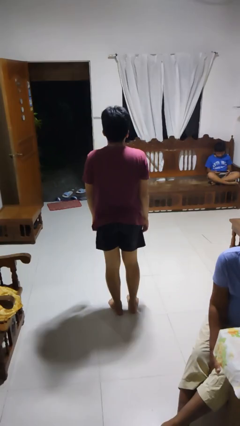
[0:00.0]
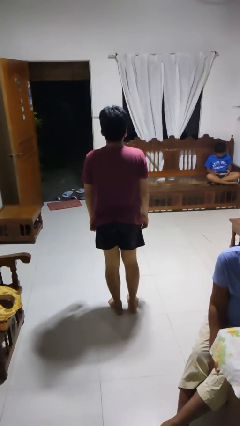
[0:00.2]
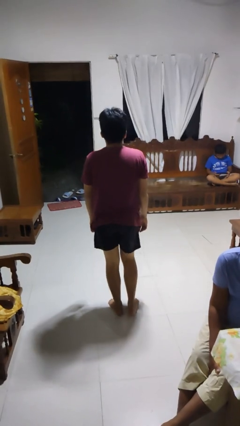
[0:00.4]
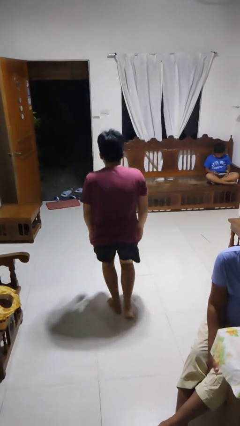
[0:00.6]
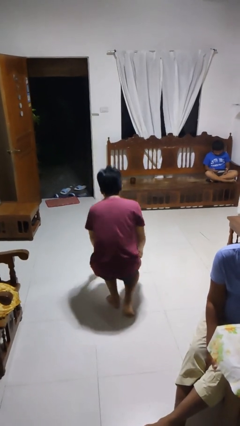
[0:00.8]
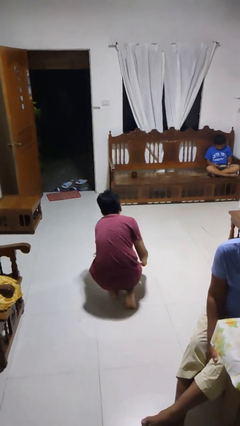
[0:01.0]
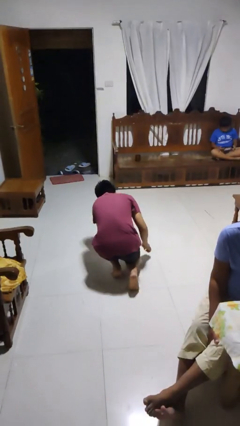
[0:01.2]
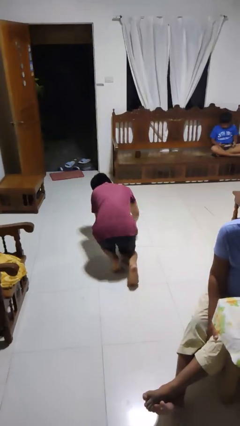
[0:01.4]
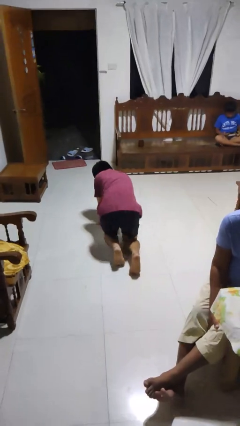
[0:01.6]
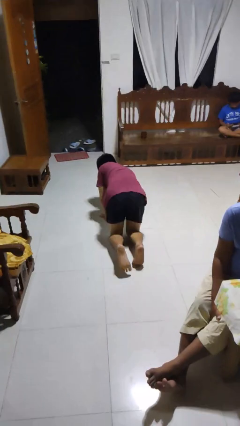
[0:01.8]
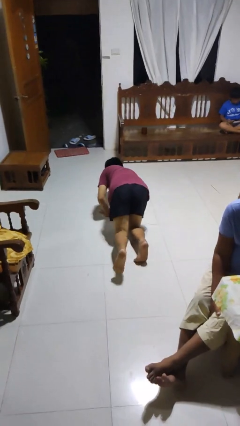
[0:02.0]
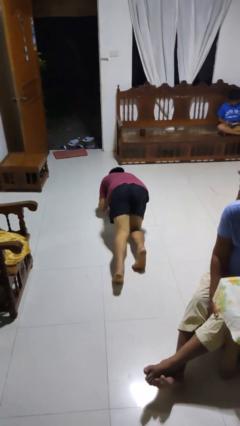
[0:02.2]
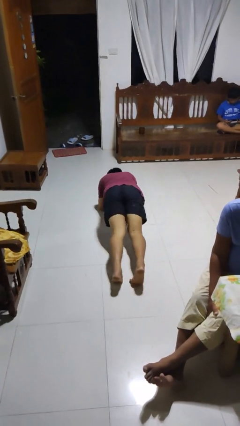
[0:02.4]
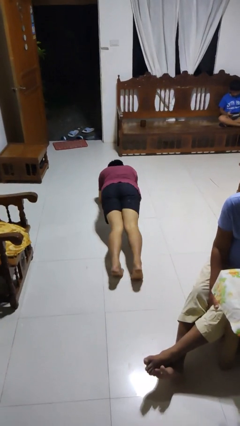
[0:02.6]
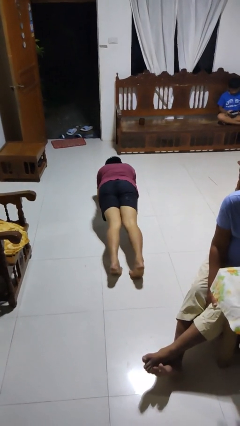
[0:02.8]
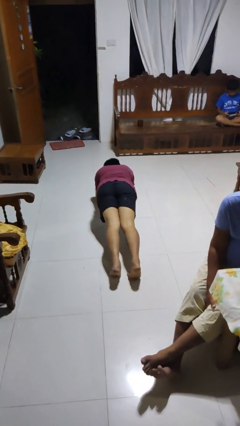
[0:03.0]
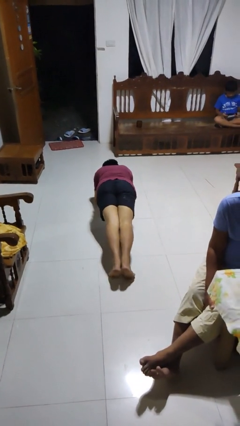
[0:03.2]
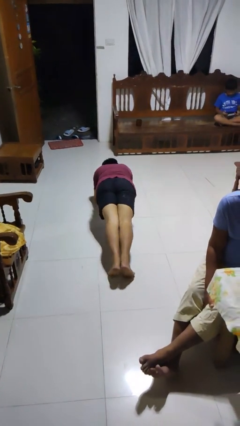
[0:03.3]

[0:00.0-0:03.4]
person exercises with plank

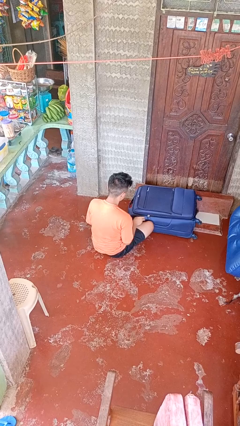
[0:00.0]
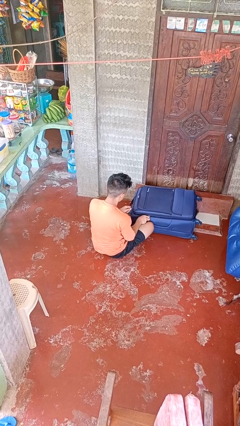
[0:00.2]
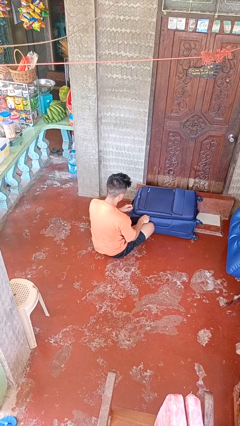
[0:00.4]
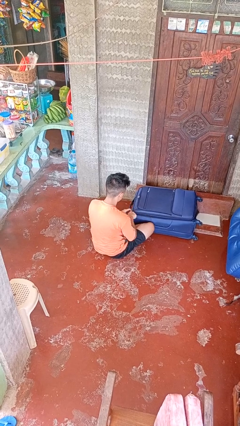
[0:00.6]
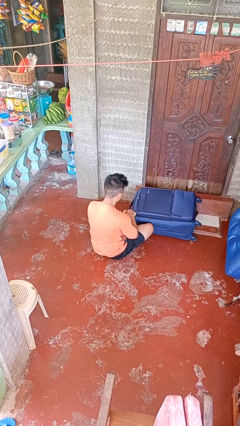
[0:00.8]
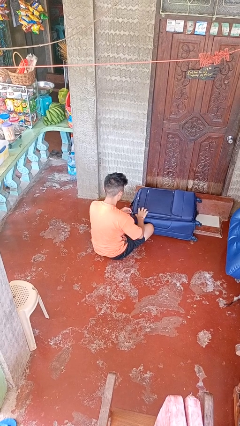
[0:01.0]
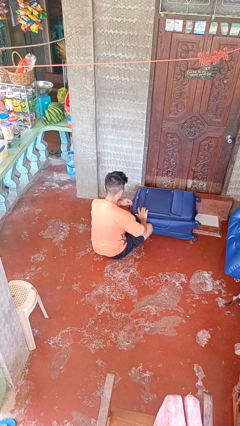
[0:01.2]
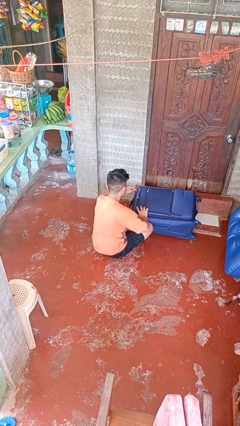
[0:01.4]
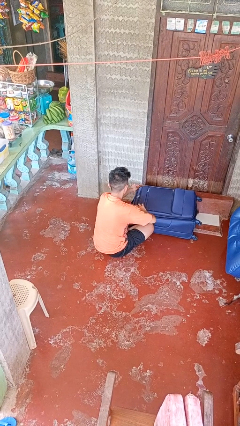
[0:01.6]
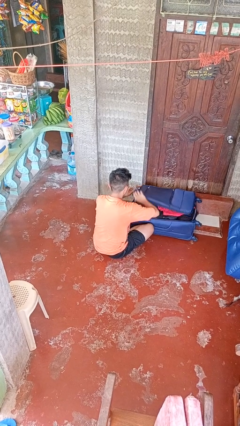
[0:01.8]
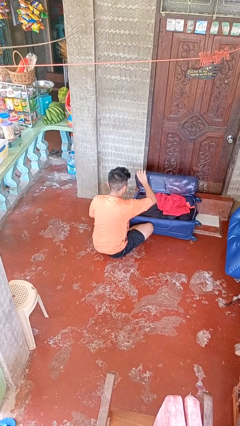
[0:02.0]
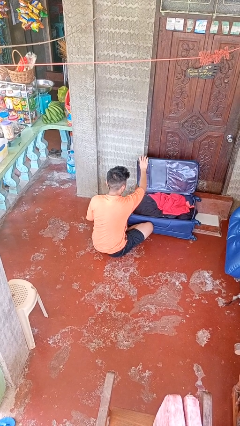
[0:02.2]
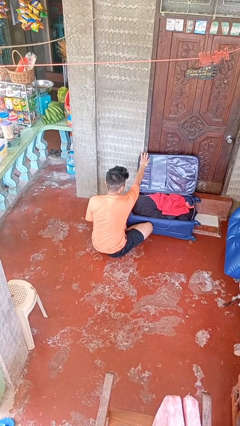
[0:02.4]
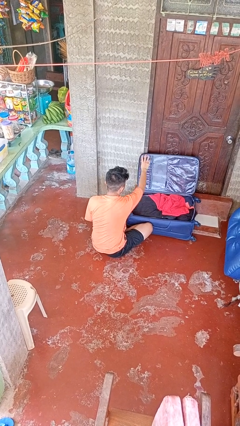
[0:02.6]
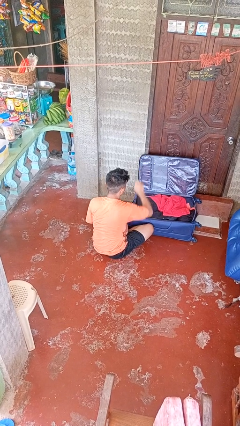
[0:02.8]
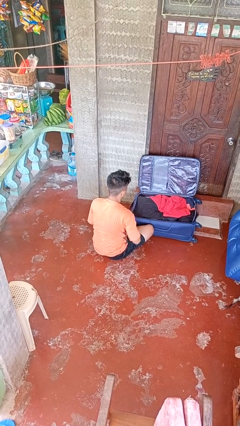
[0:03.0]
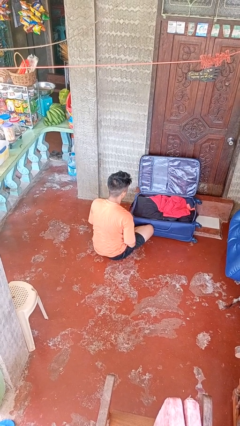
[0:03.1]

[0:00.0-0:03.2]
person opens suitcase

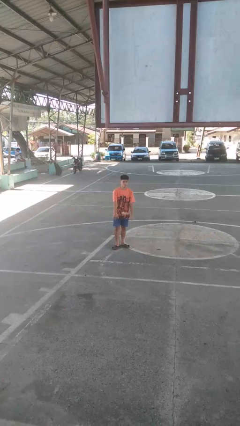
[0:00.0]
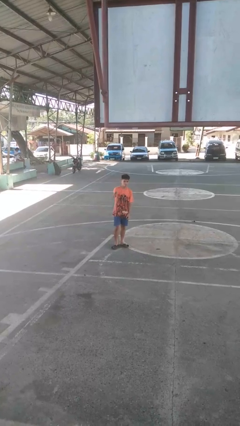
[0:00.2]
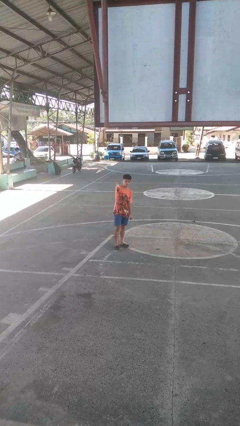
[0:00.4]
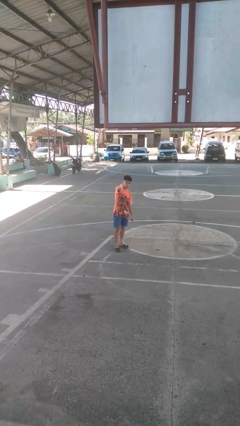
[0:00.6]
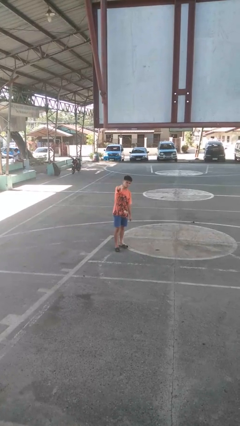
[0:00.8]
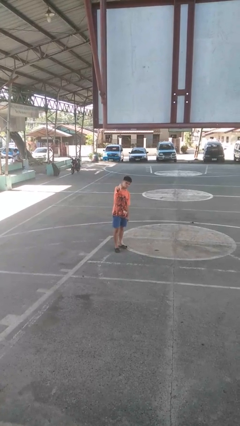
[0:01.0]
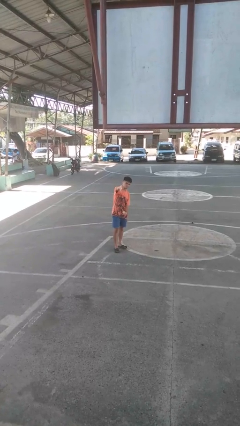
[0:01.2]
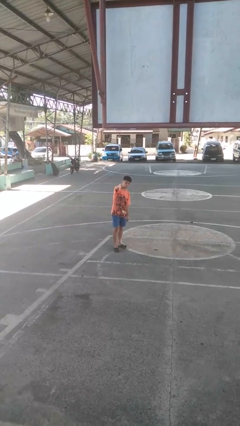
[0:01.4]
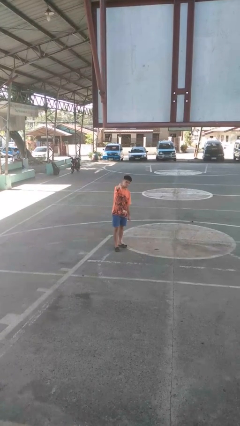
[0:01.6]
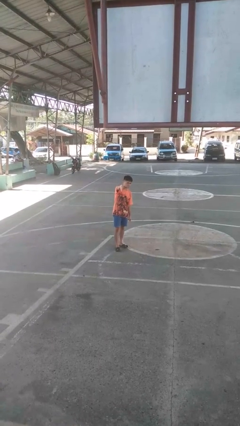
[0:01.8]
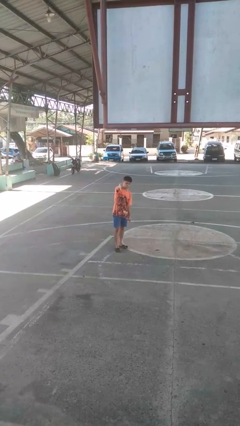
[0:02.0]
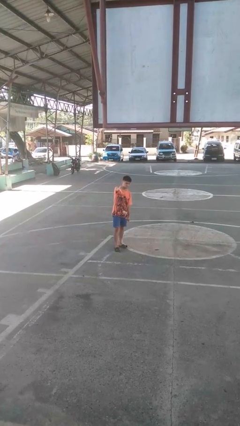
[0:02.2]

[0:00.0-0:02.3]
person gestures thumbs down

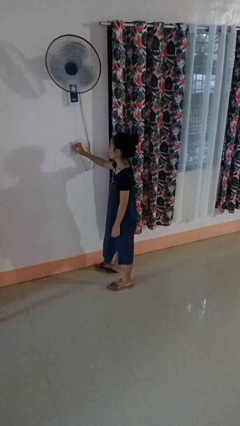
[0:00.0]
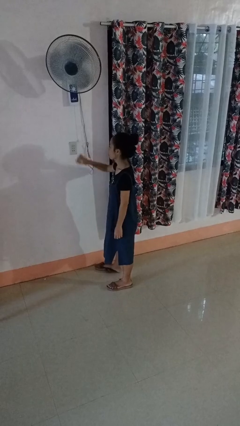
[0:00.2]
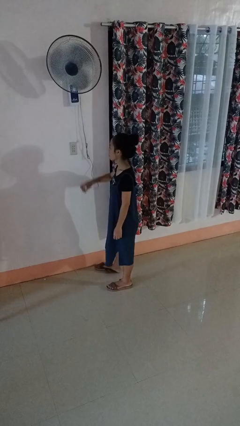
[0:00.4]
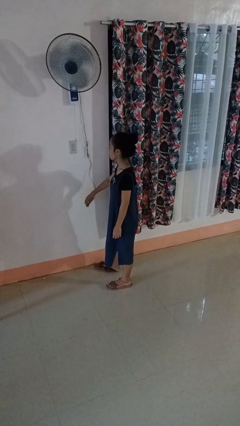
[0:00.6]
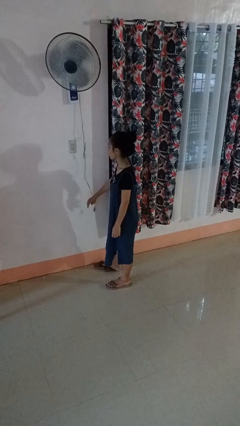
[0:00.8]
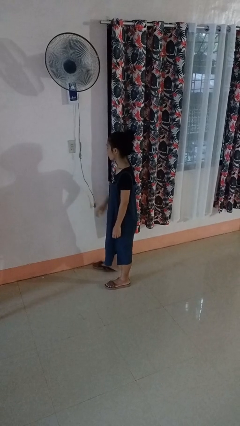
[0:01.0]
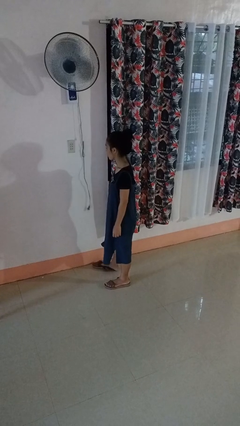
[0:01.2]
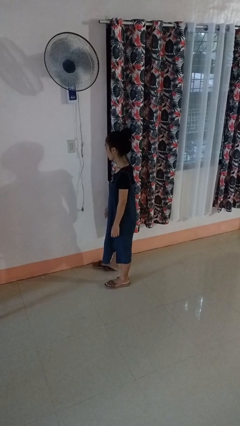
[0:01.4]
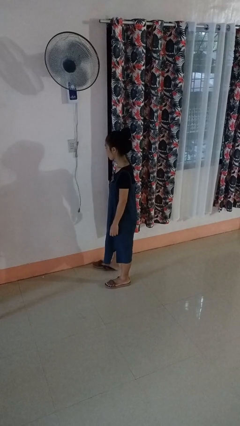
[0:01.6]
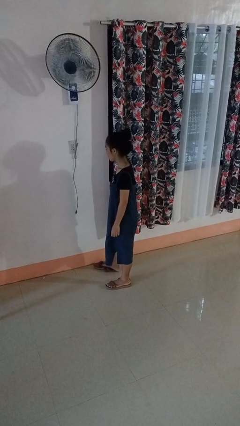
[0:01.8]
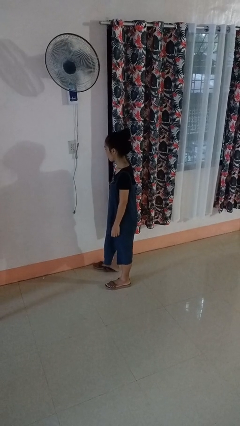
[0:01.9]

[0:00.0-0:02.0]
person unplugs from electrical socket

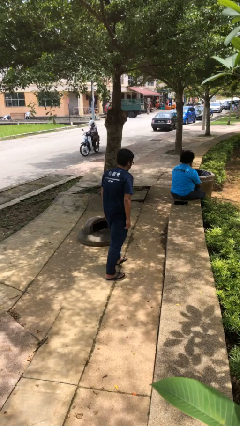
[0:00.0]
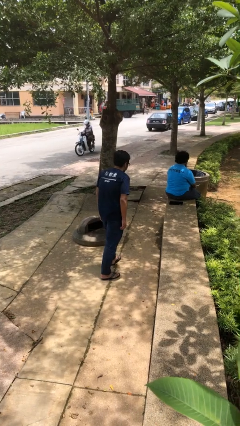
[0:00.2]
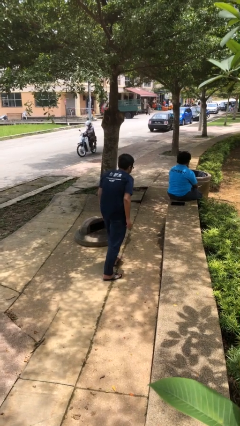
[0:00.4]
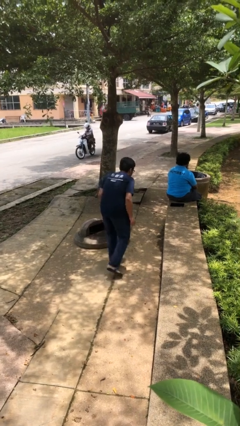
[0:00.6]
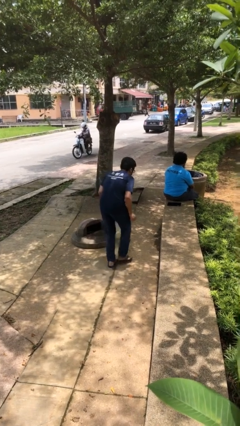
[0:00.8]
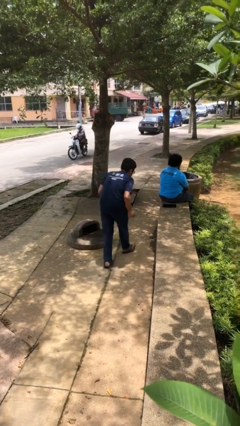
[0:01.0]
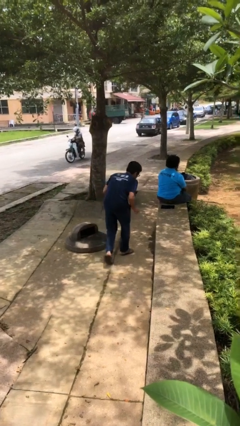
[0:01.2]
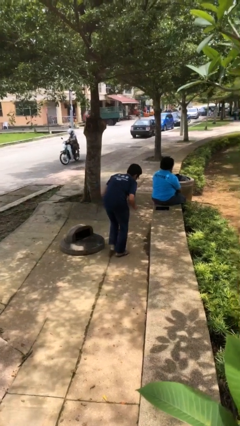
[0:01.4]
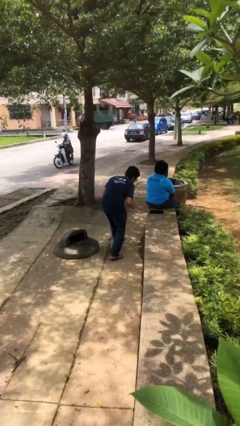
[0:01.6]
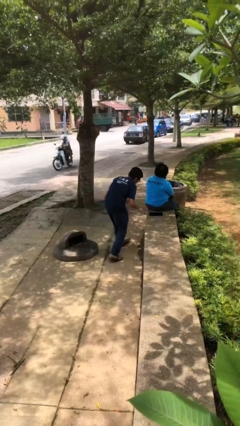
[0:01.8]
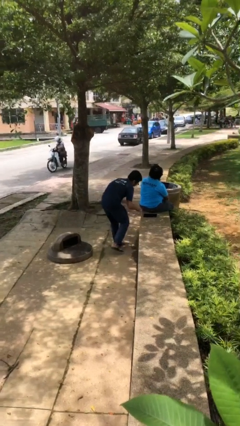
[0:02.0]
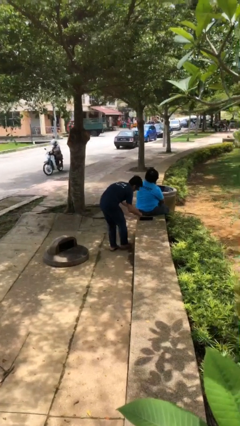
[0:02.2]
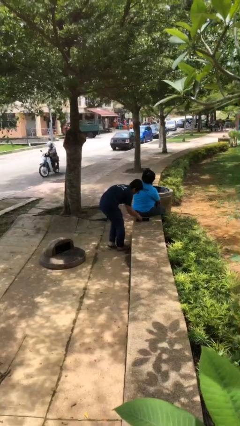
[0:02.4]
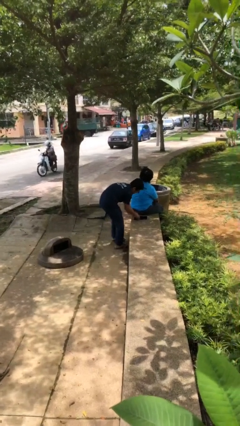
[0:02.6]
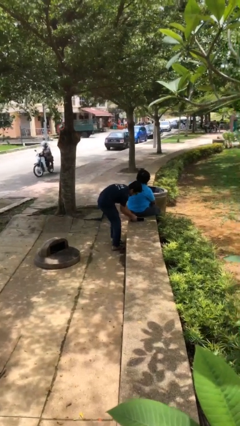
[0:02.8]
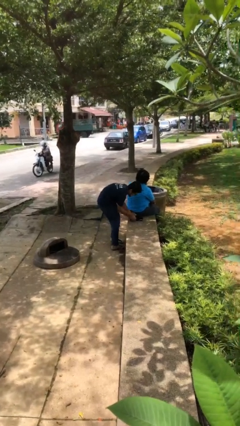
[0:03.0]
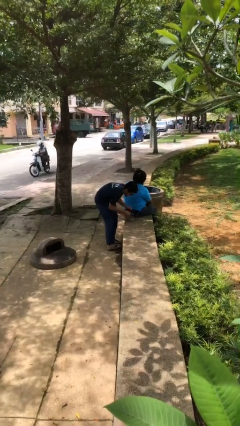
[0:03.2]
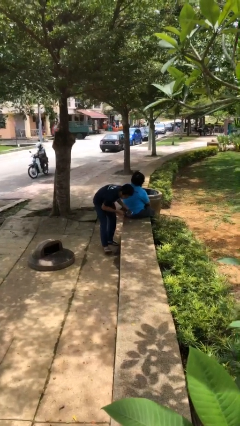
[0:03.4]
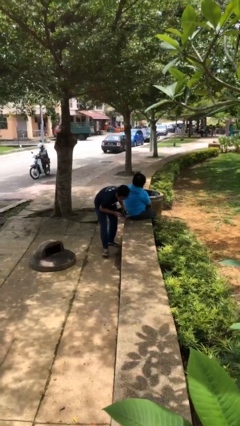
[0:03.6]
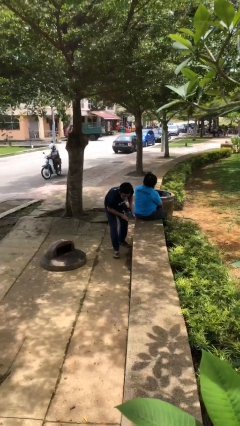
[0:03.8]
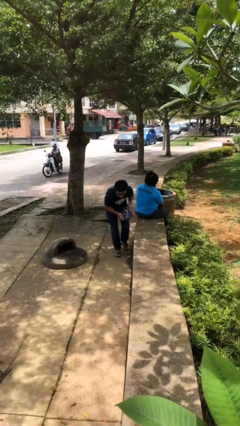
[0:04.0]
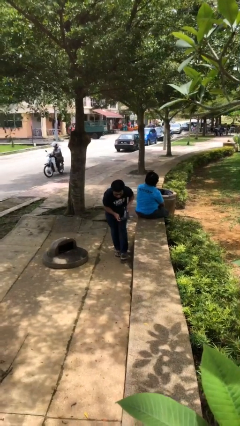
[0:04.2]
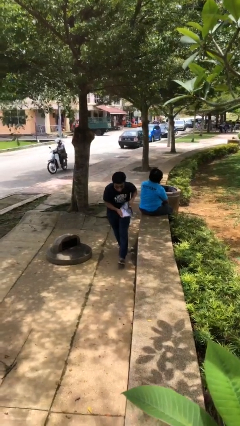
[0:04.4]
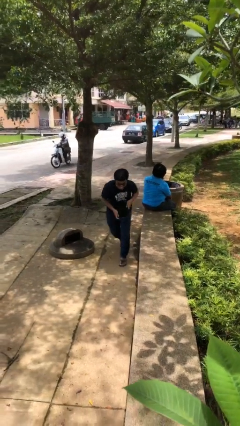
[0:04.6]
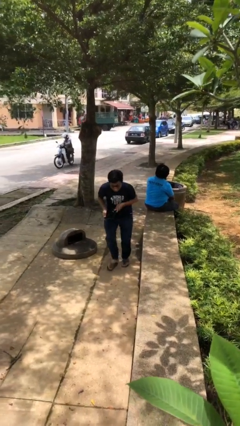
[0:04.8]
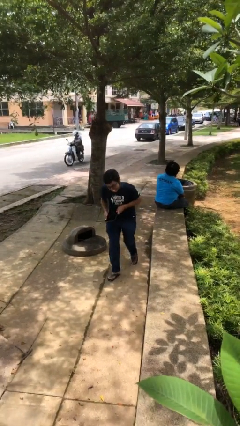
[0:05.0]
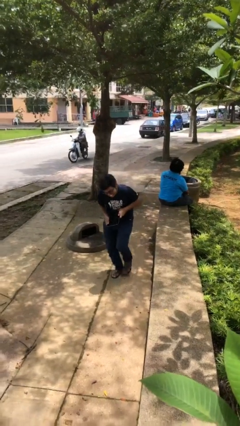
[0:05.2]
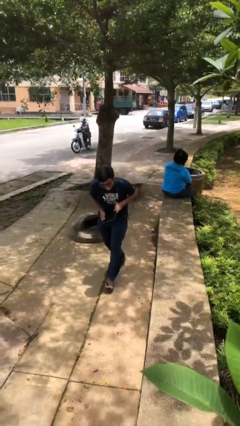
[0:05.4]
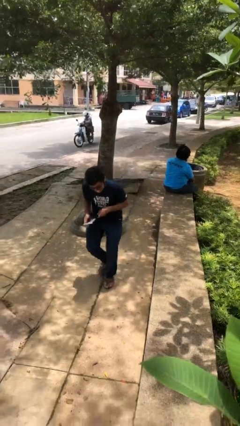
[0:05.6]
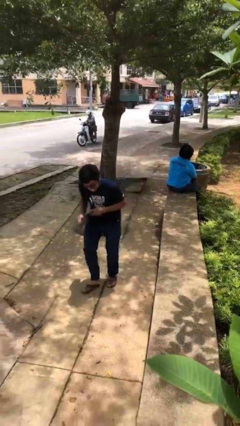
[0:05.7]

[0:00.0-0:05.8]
person steals object from person

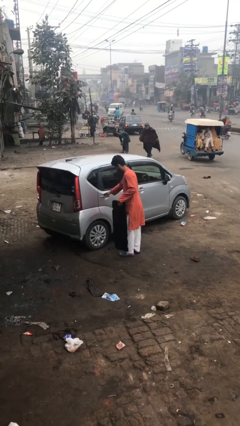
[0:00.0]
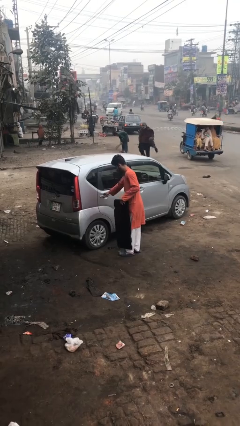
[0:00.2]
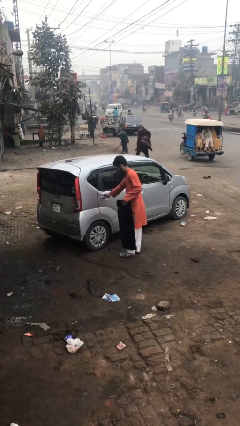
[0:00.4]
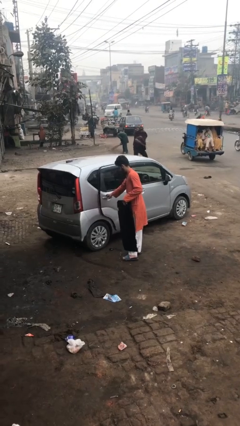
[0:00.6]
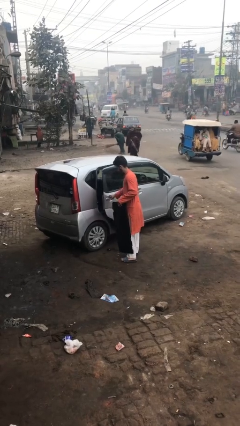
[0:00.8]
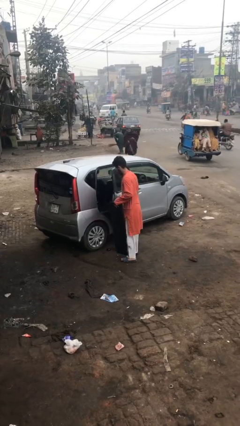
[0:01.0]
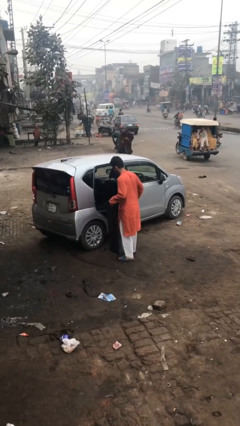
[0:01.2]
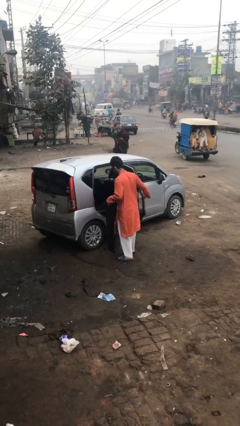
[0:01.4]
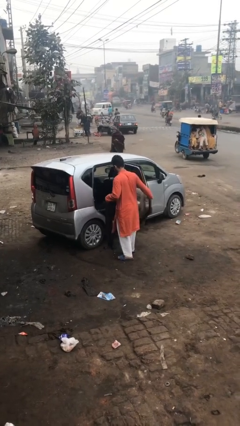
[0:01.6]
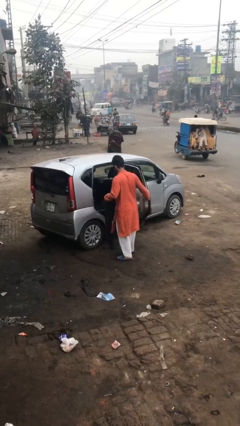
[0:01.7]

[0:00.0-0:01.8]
person opens car door
